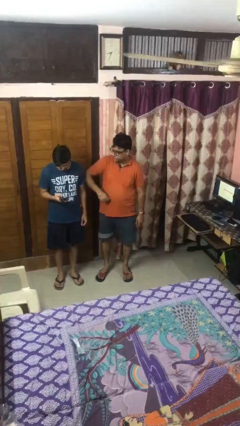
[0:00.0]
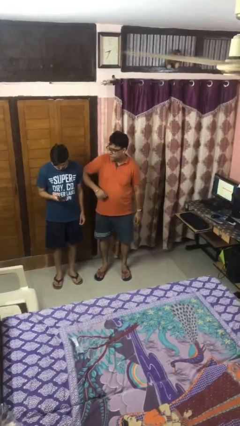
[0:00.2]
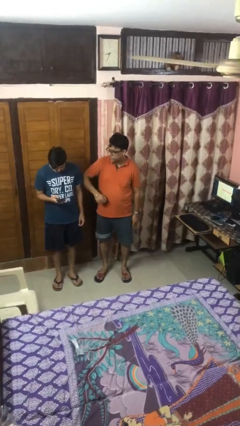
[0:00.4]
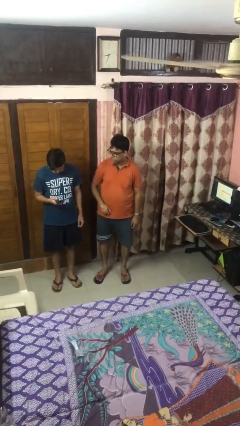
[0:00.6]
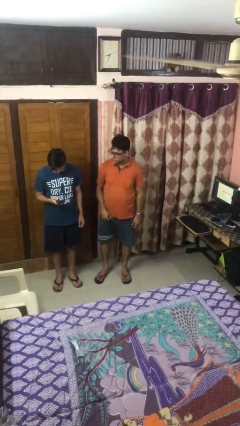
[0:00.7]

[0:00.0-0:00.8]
person nudges person with elbow

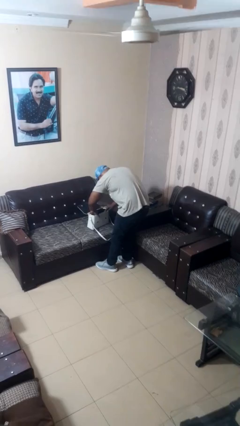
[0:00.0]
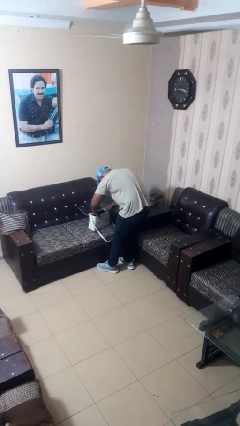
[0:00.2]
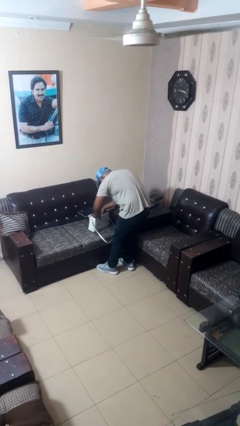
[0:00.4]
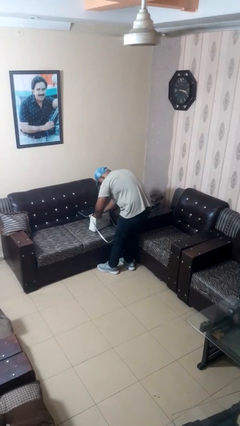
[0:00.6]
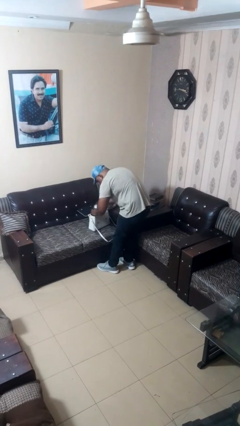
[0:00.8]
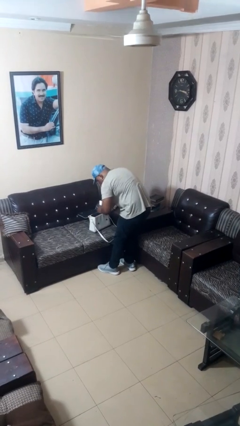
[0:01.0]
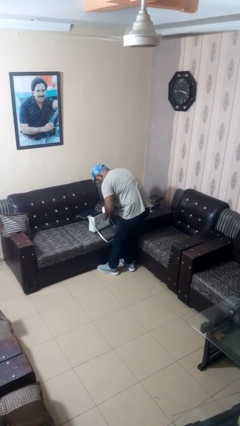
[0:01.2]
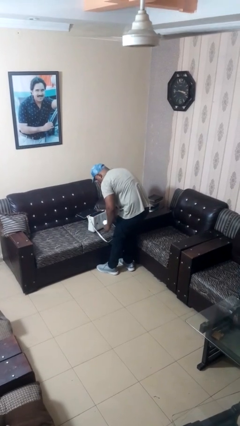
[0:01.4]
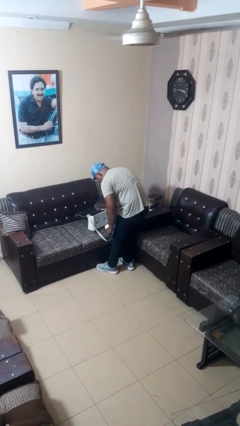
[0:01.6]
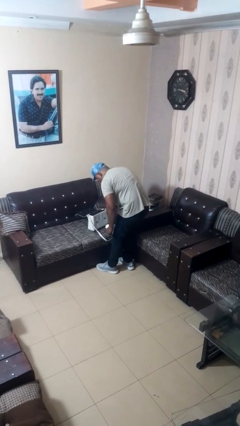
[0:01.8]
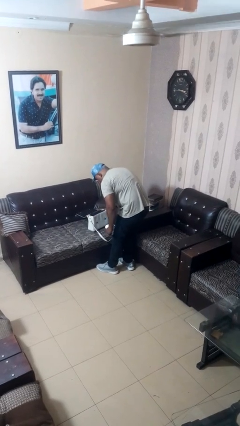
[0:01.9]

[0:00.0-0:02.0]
person takes object from purse

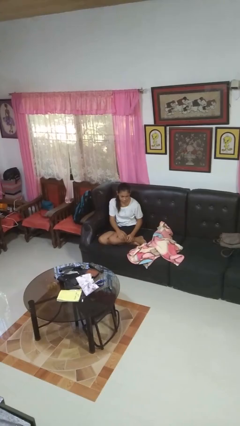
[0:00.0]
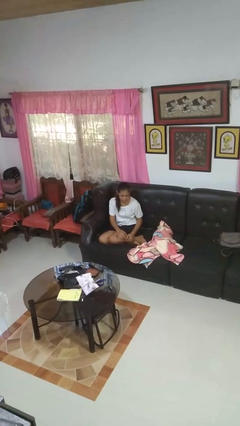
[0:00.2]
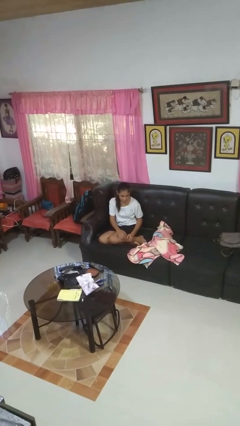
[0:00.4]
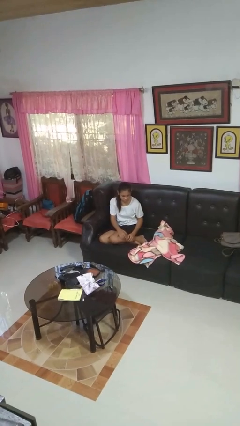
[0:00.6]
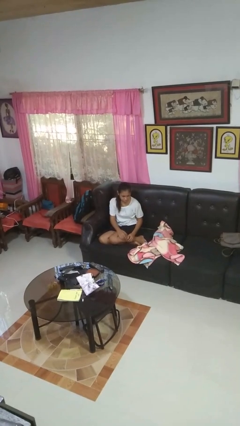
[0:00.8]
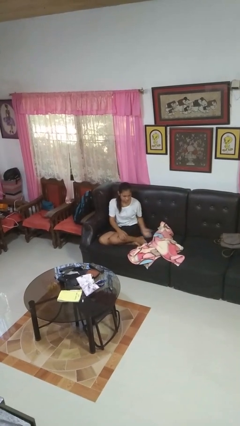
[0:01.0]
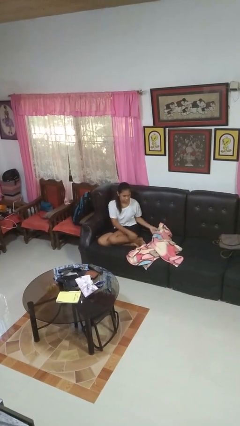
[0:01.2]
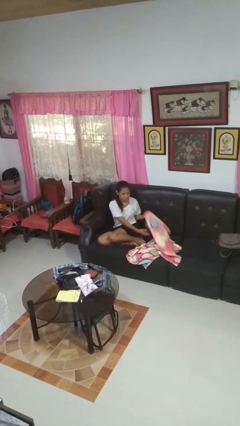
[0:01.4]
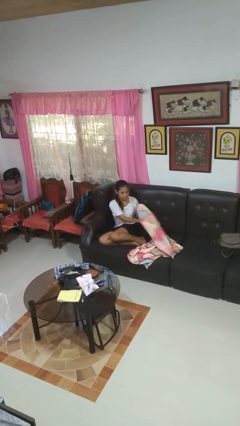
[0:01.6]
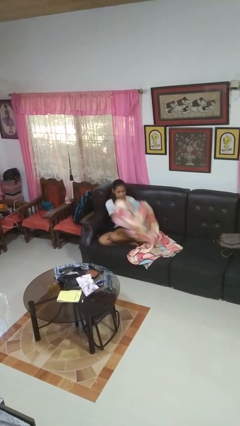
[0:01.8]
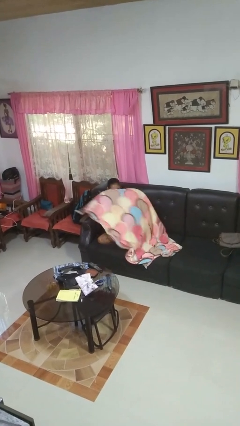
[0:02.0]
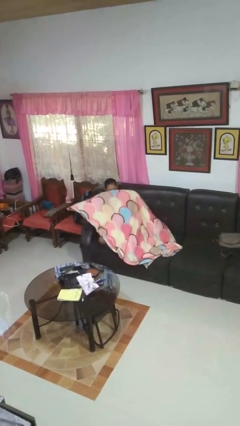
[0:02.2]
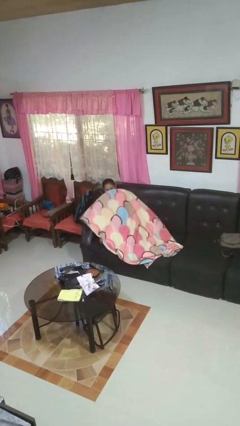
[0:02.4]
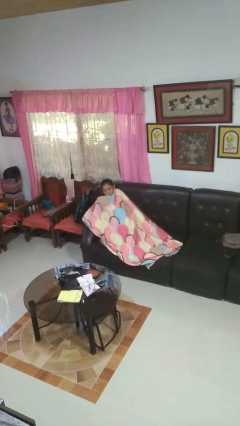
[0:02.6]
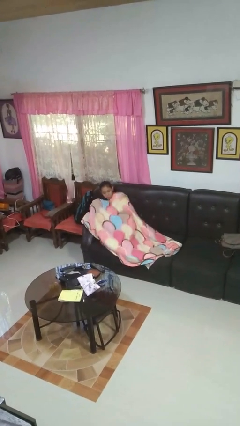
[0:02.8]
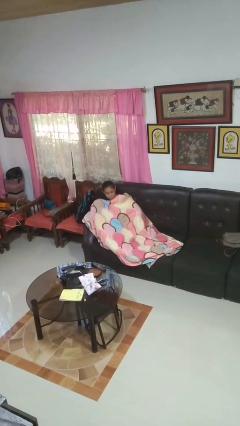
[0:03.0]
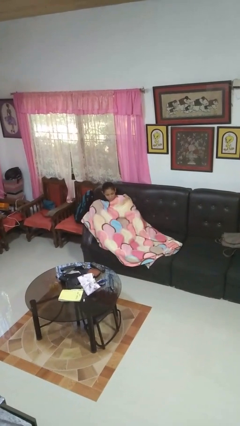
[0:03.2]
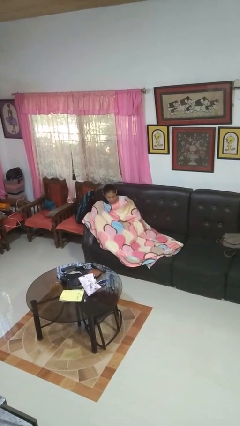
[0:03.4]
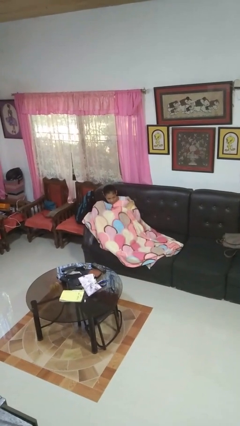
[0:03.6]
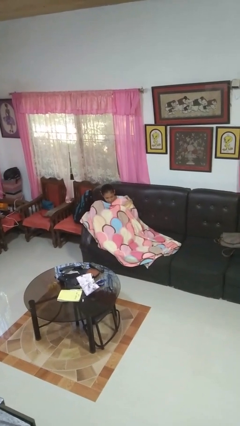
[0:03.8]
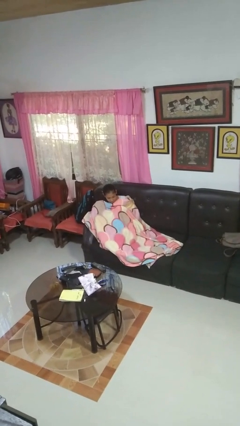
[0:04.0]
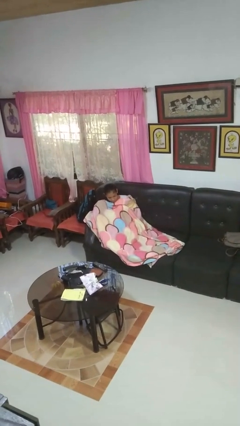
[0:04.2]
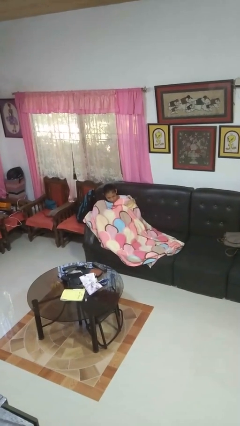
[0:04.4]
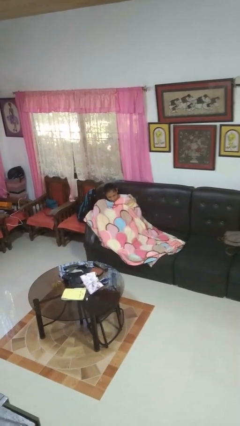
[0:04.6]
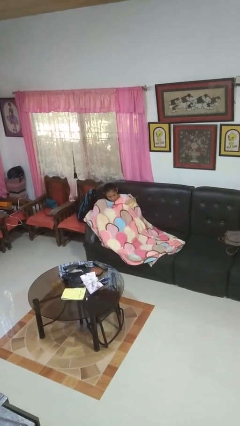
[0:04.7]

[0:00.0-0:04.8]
person covers with blanket

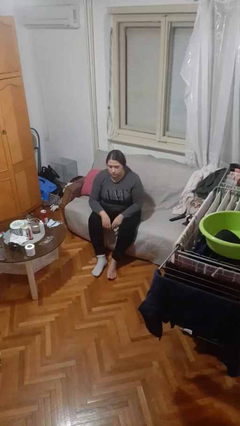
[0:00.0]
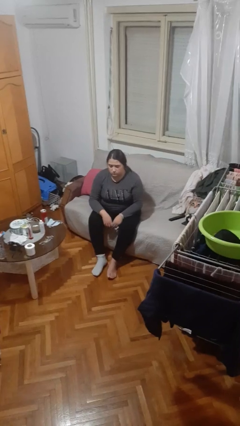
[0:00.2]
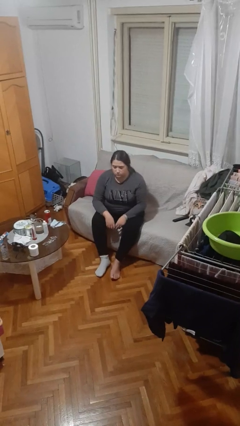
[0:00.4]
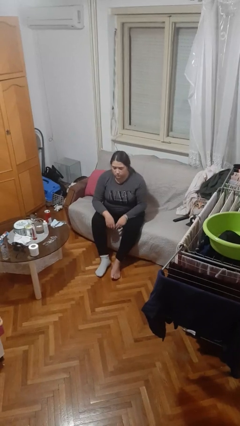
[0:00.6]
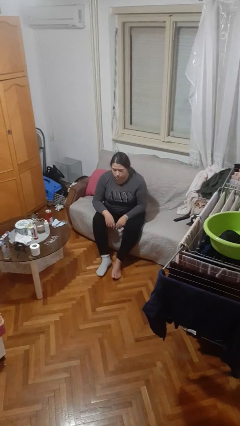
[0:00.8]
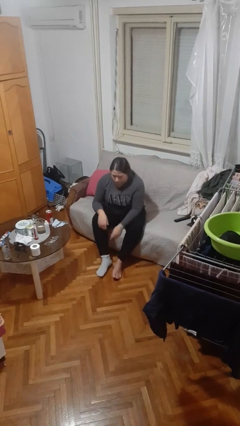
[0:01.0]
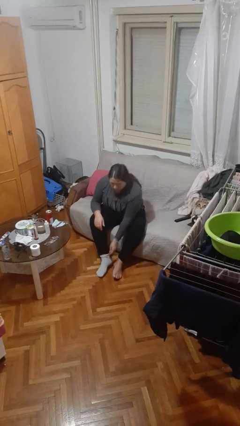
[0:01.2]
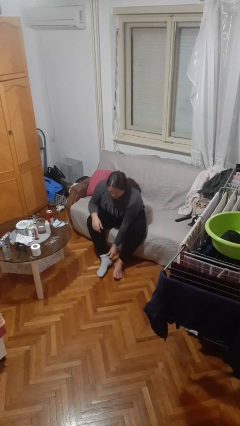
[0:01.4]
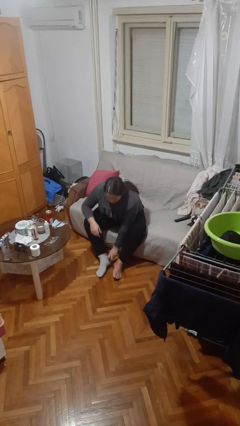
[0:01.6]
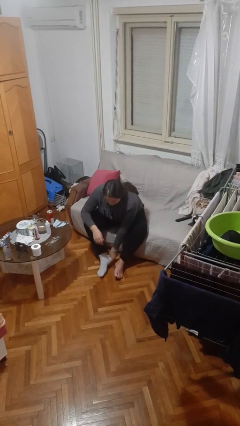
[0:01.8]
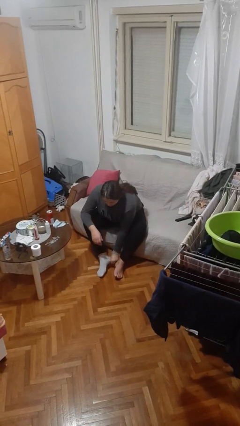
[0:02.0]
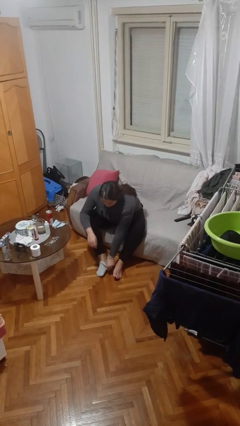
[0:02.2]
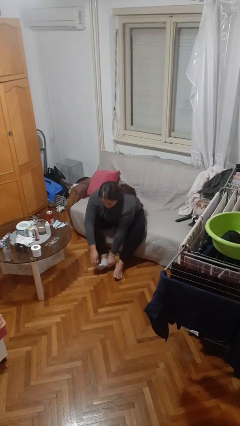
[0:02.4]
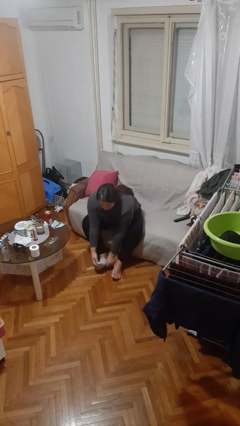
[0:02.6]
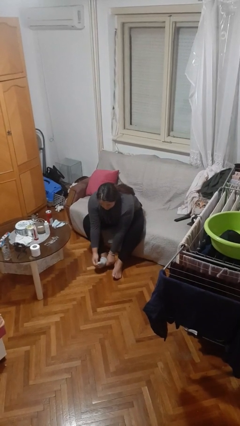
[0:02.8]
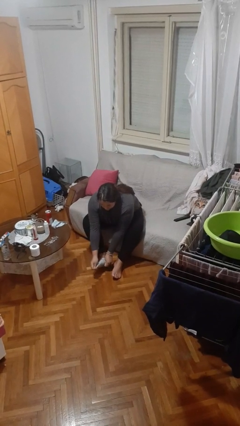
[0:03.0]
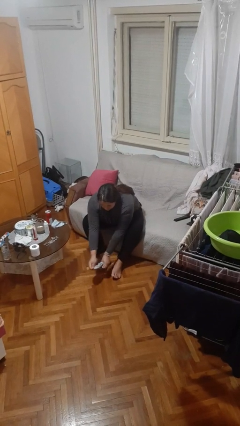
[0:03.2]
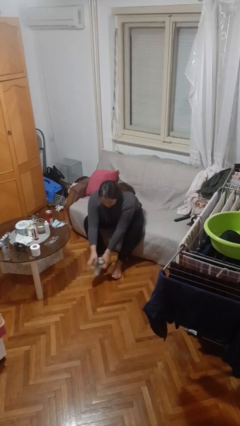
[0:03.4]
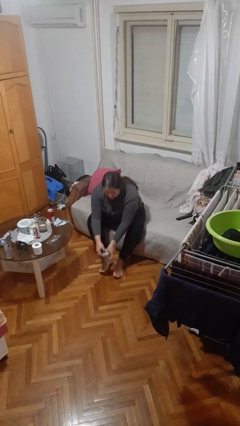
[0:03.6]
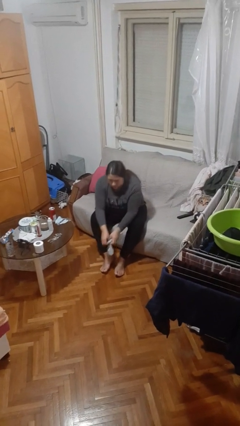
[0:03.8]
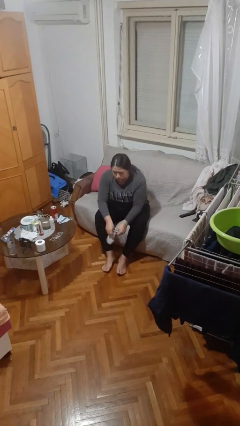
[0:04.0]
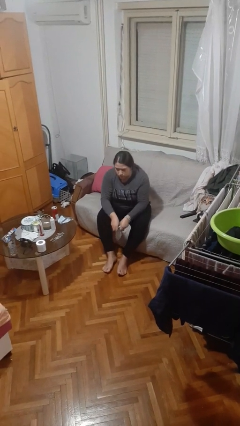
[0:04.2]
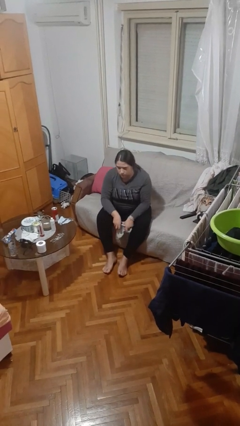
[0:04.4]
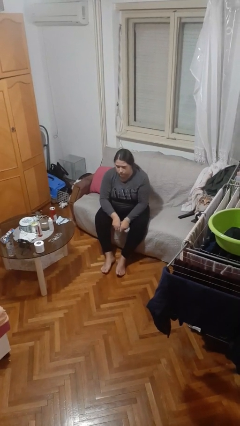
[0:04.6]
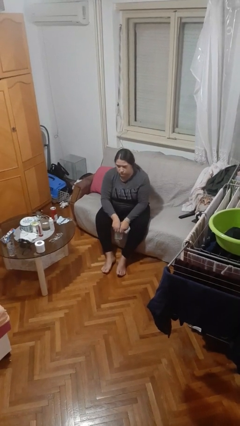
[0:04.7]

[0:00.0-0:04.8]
person takes off socks

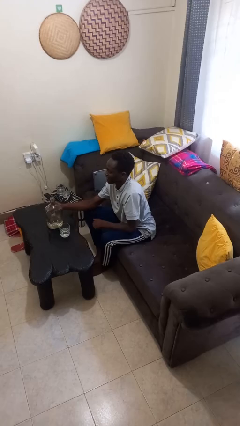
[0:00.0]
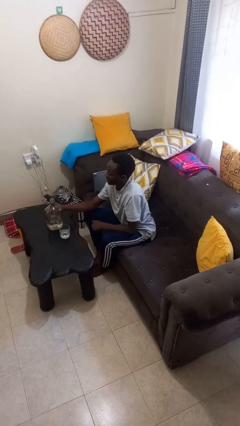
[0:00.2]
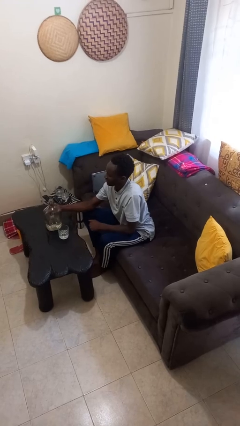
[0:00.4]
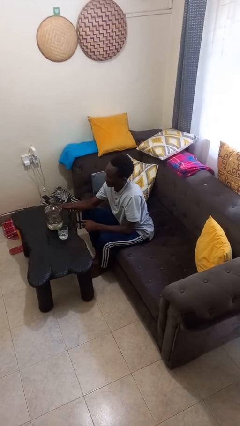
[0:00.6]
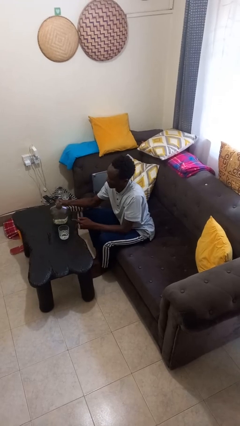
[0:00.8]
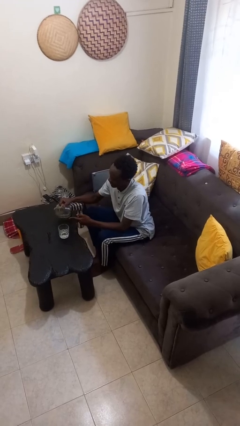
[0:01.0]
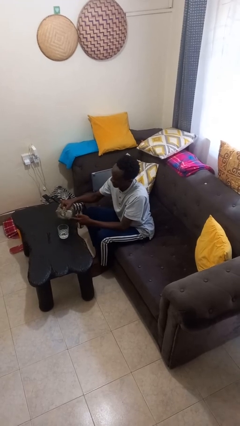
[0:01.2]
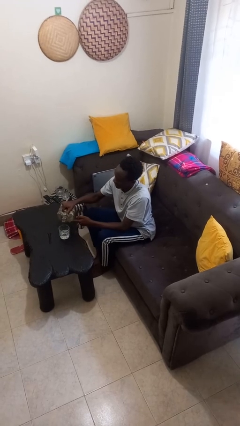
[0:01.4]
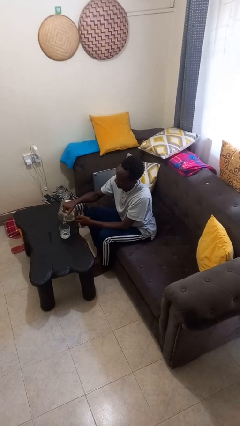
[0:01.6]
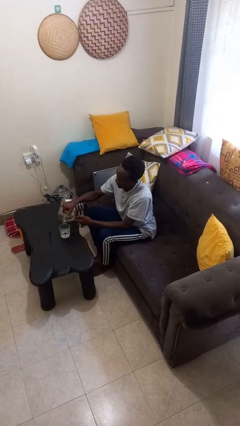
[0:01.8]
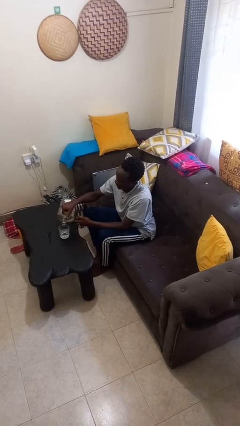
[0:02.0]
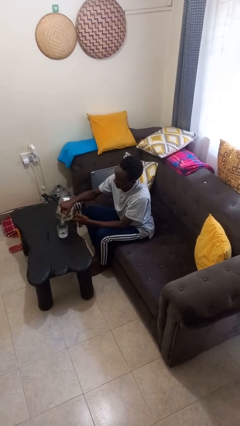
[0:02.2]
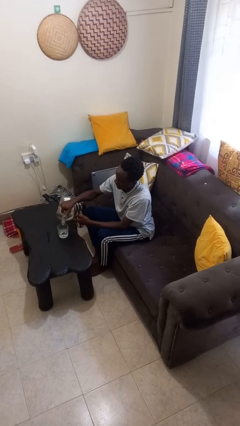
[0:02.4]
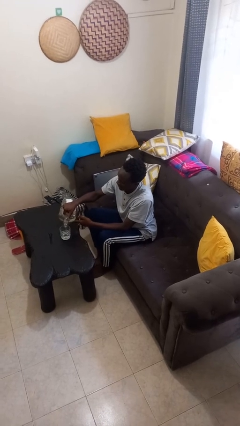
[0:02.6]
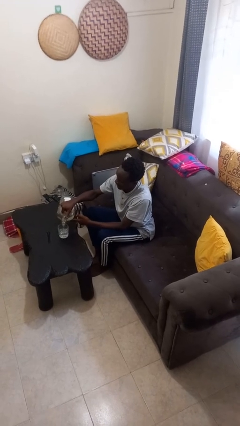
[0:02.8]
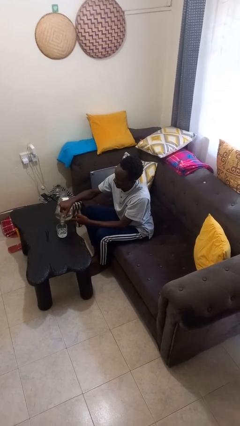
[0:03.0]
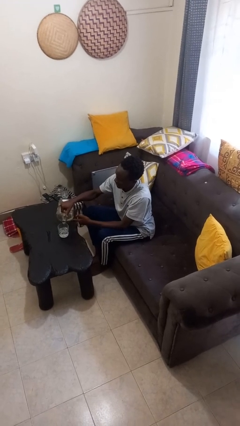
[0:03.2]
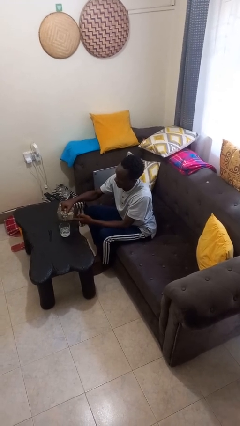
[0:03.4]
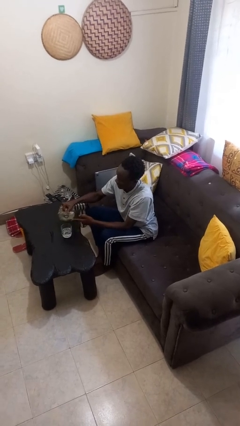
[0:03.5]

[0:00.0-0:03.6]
person pours liquid into cup

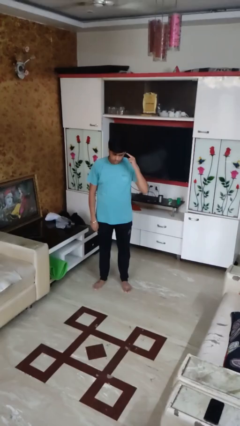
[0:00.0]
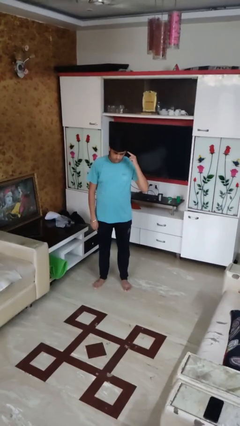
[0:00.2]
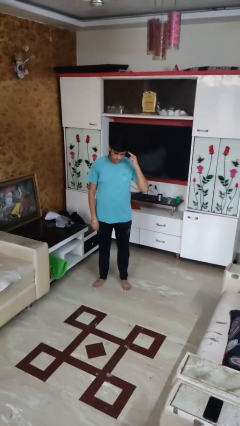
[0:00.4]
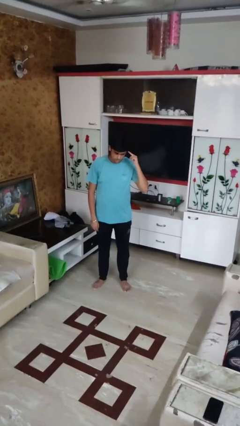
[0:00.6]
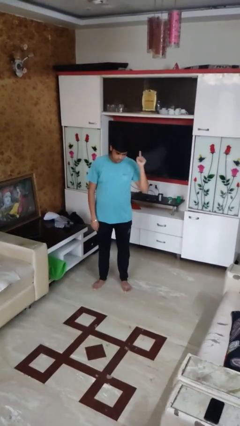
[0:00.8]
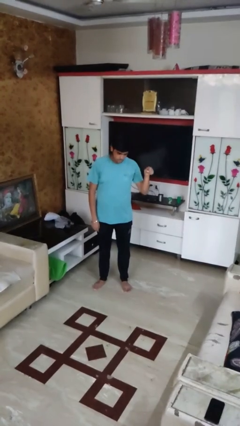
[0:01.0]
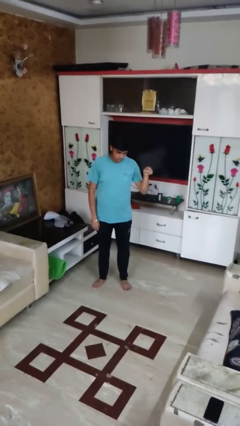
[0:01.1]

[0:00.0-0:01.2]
person gestures listen closely

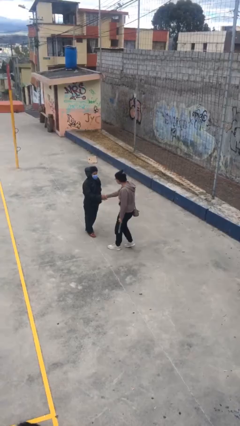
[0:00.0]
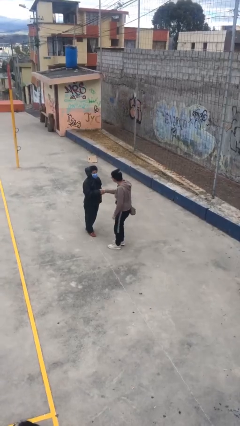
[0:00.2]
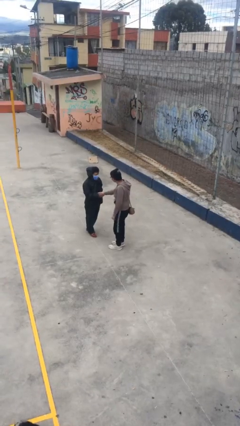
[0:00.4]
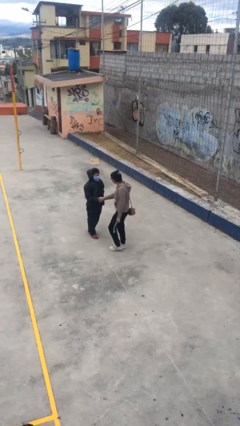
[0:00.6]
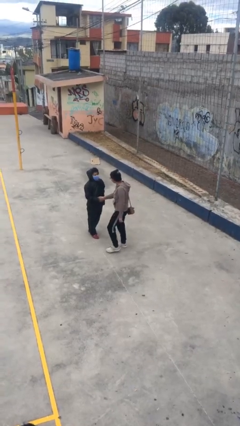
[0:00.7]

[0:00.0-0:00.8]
person shakes hand
